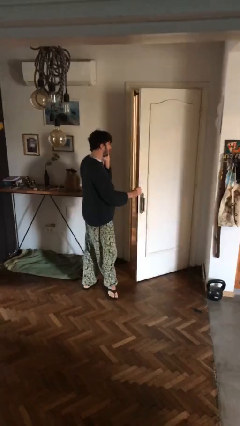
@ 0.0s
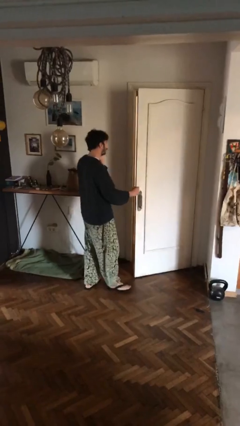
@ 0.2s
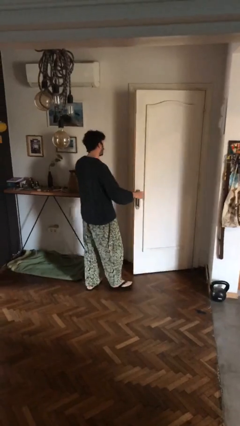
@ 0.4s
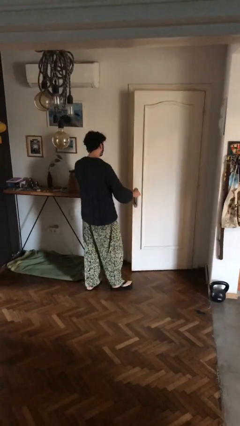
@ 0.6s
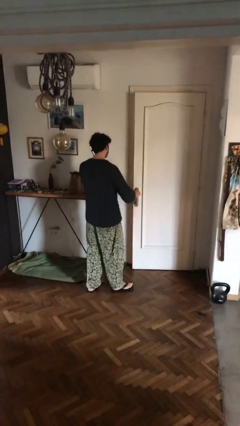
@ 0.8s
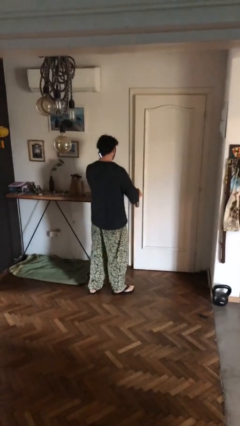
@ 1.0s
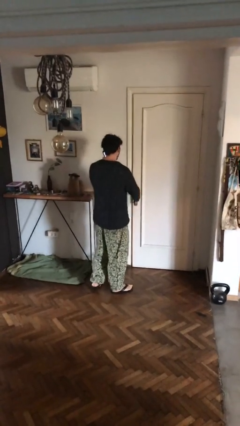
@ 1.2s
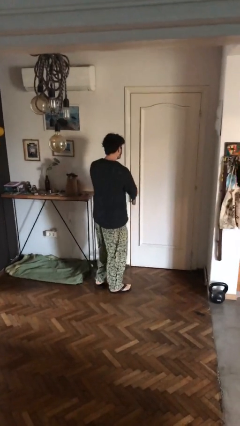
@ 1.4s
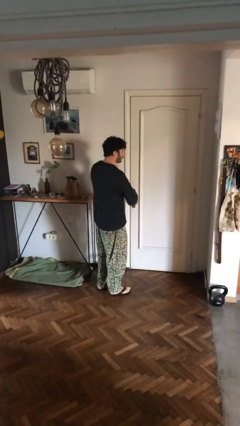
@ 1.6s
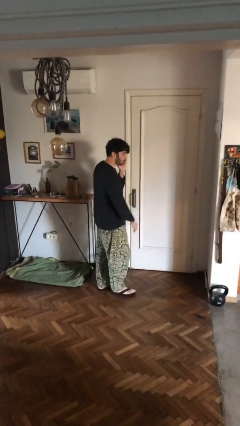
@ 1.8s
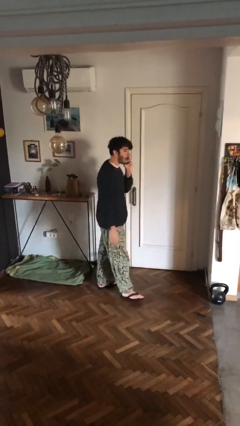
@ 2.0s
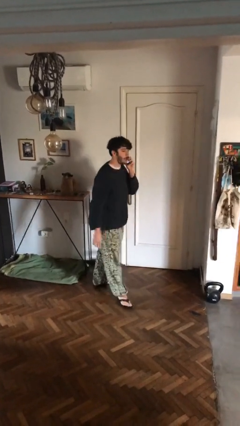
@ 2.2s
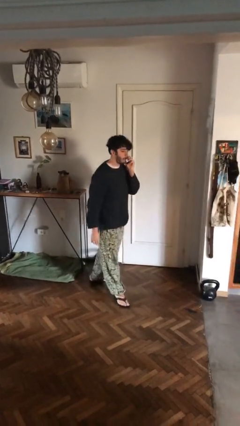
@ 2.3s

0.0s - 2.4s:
person closes facility door

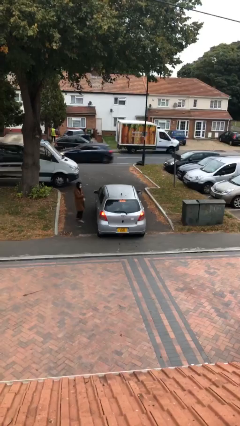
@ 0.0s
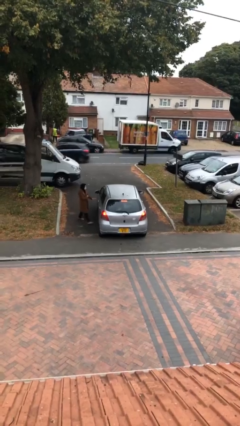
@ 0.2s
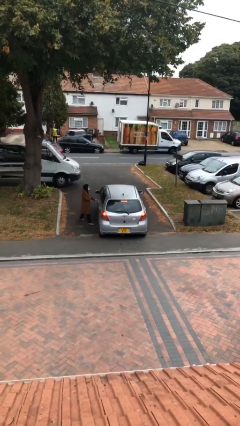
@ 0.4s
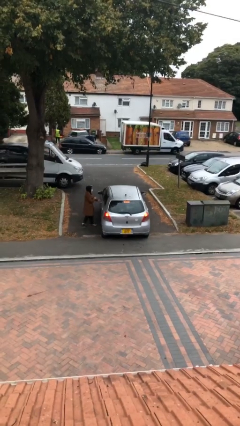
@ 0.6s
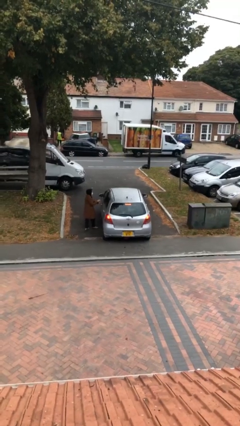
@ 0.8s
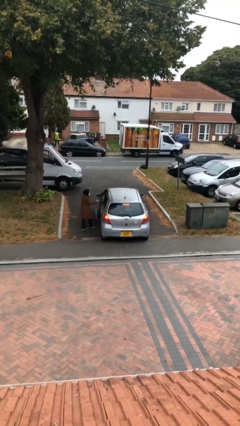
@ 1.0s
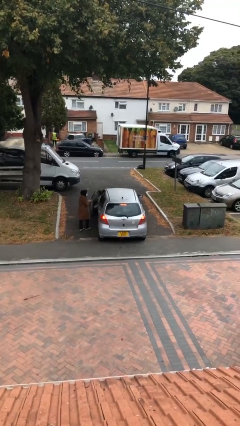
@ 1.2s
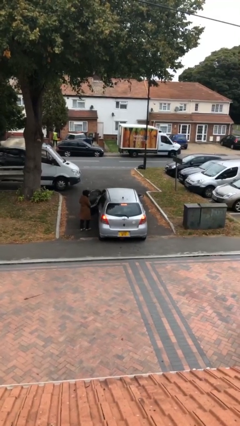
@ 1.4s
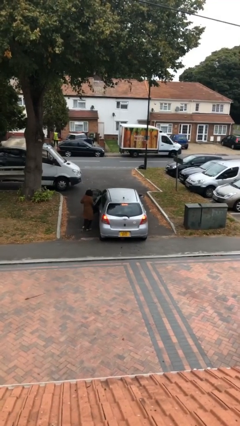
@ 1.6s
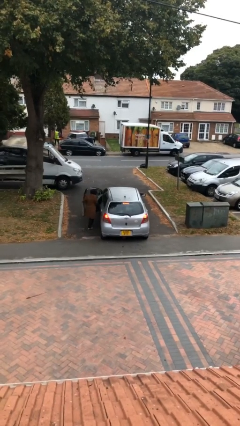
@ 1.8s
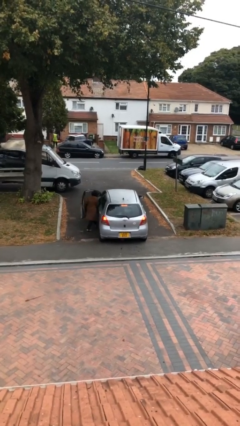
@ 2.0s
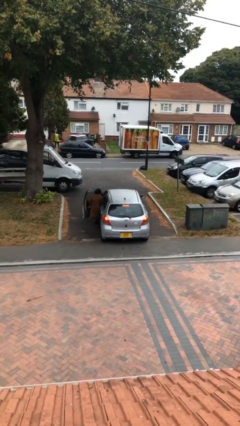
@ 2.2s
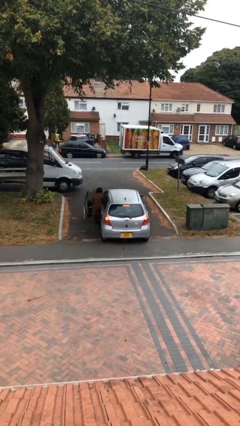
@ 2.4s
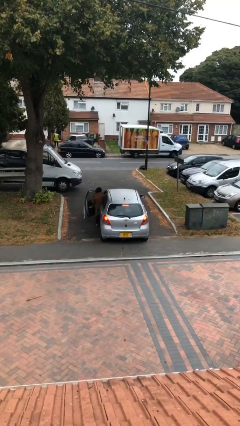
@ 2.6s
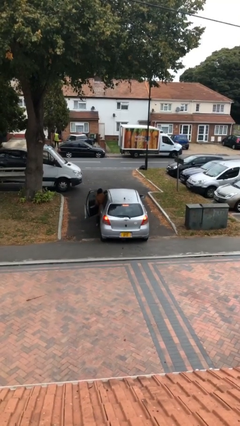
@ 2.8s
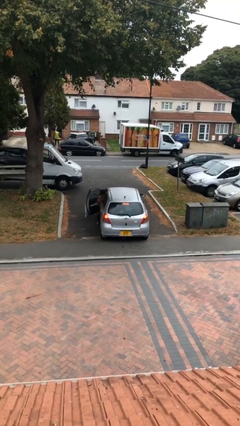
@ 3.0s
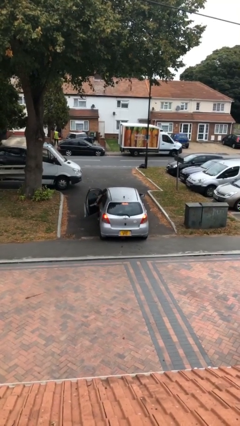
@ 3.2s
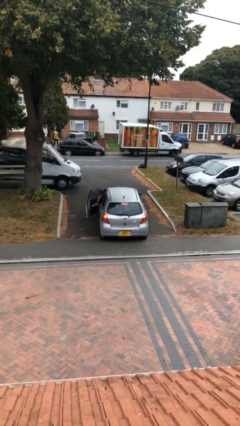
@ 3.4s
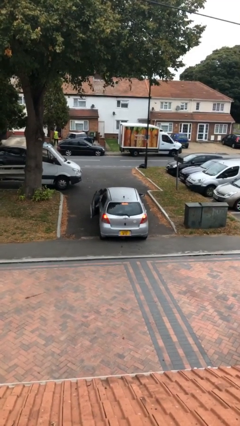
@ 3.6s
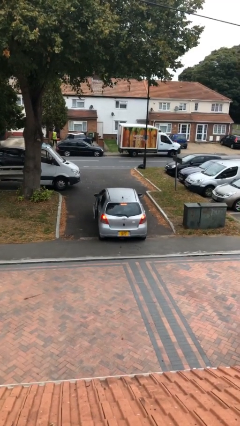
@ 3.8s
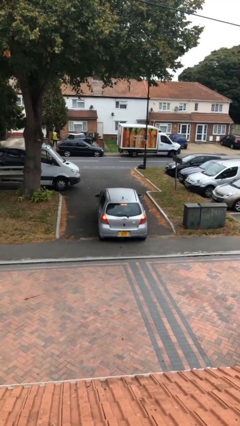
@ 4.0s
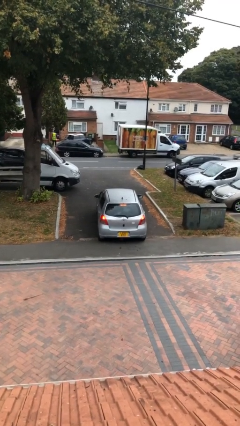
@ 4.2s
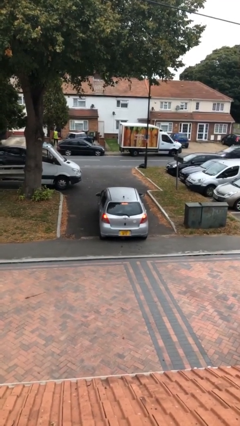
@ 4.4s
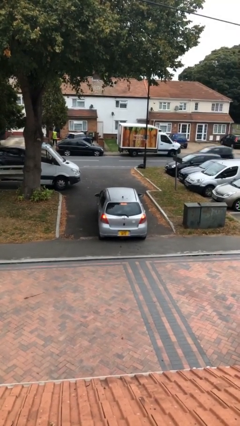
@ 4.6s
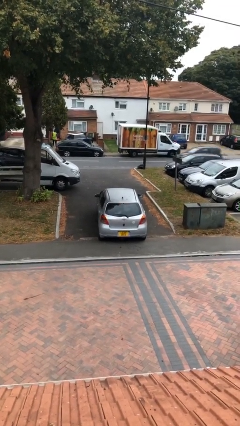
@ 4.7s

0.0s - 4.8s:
car picks up person

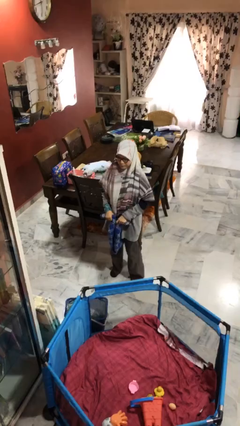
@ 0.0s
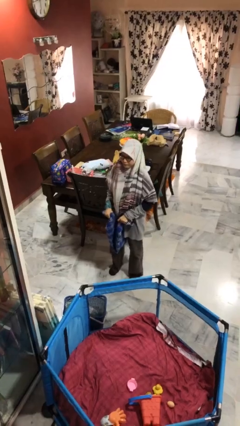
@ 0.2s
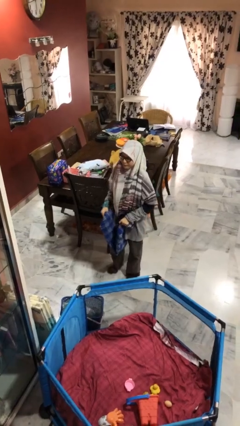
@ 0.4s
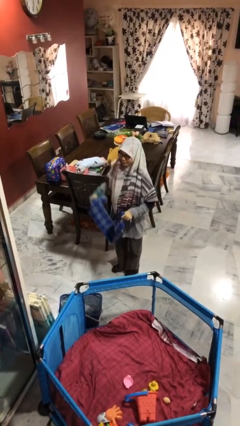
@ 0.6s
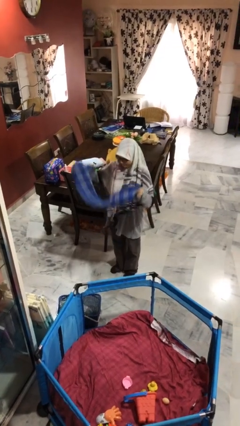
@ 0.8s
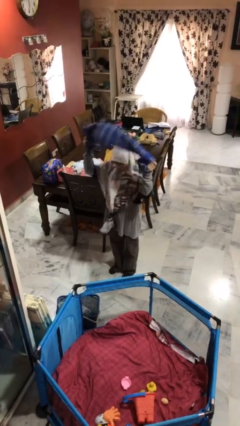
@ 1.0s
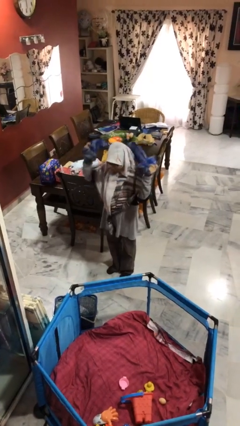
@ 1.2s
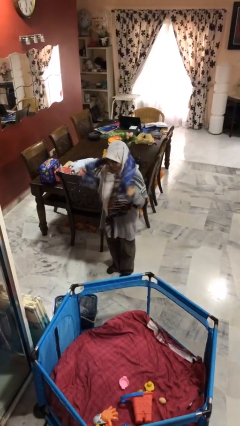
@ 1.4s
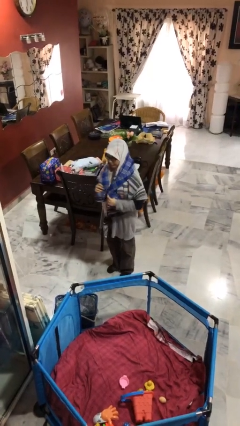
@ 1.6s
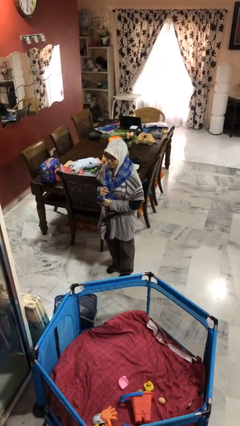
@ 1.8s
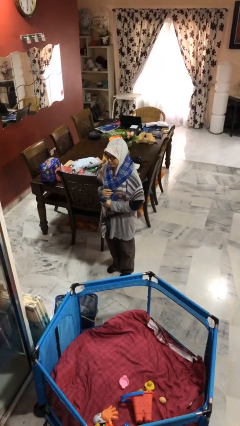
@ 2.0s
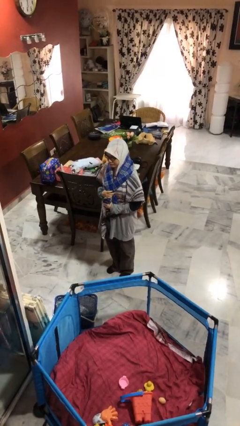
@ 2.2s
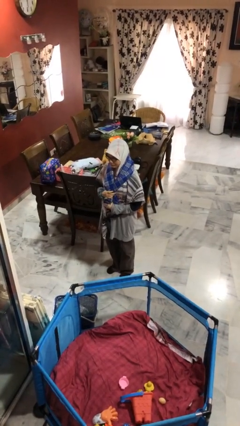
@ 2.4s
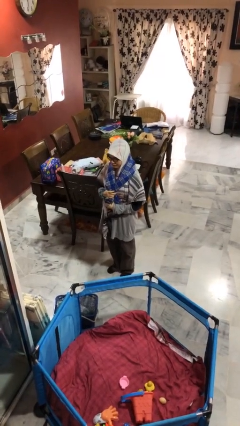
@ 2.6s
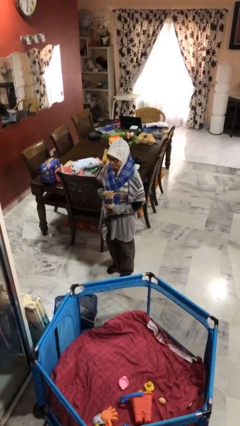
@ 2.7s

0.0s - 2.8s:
person puts on scarf

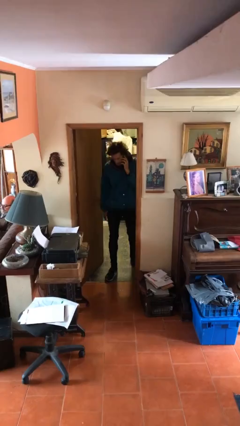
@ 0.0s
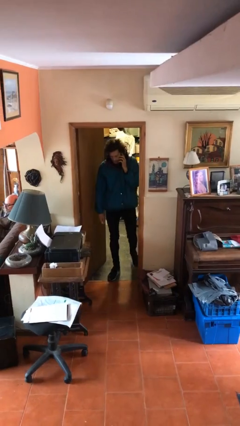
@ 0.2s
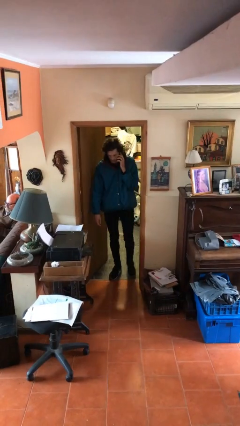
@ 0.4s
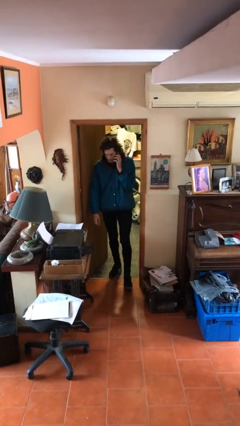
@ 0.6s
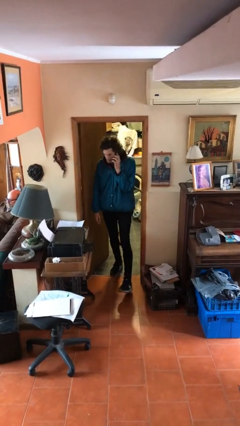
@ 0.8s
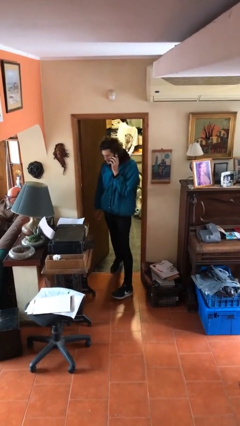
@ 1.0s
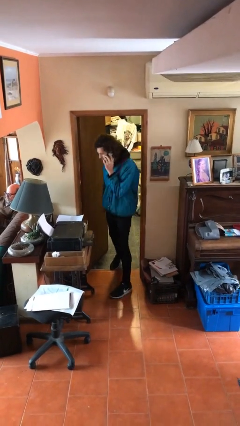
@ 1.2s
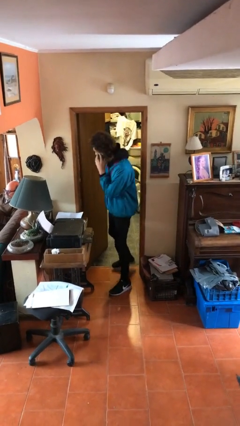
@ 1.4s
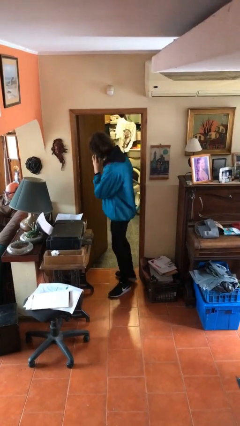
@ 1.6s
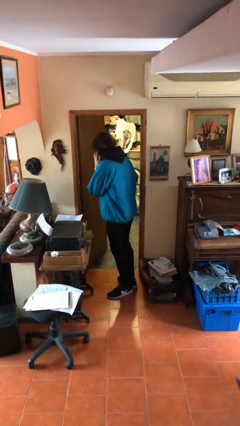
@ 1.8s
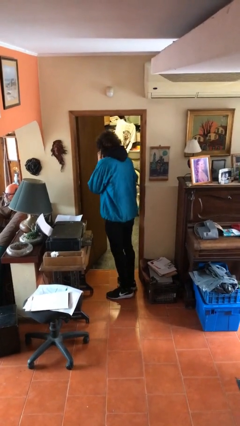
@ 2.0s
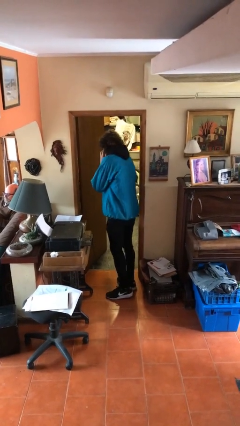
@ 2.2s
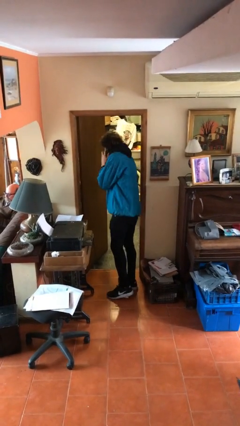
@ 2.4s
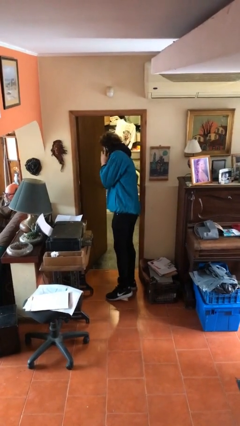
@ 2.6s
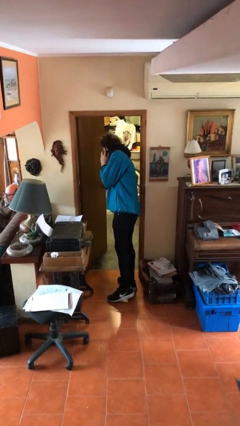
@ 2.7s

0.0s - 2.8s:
person enters scene through structure

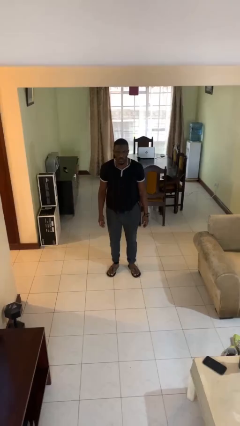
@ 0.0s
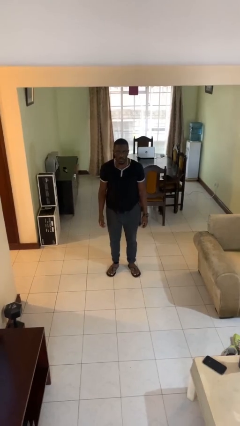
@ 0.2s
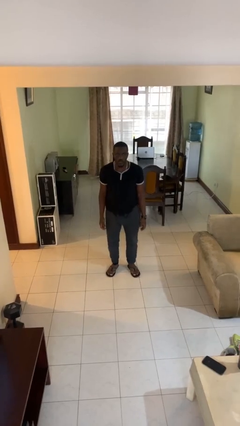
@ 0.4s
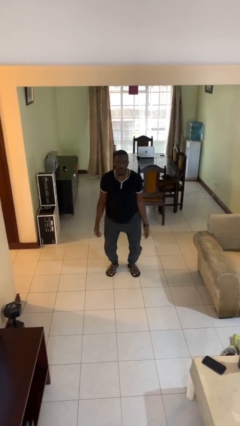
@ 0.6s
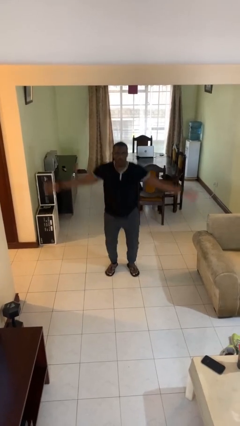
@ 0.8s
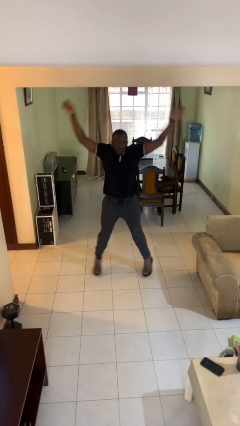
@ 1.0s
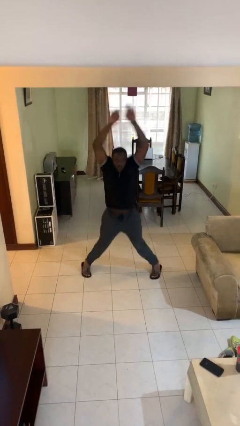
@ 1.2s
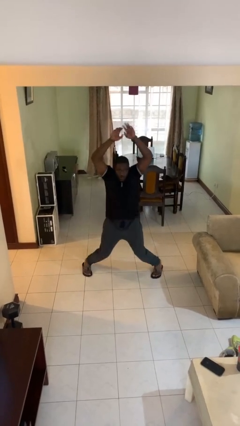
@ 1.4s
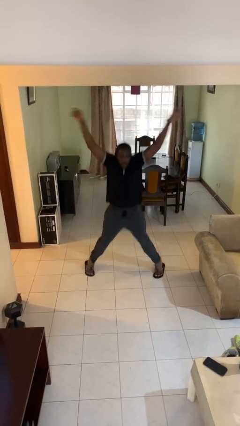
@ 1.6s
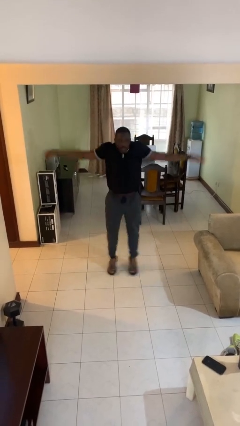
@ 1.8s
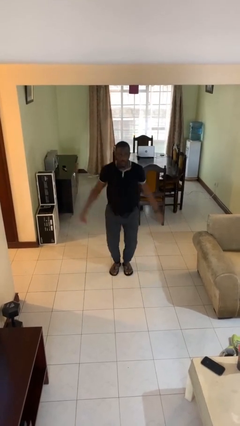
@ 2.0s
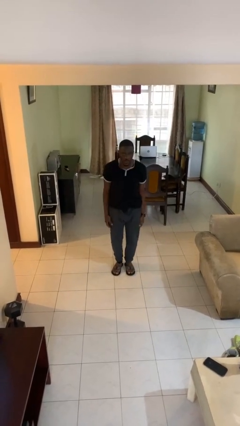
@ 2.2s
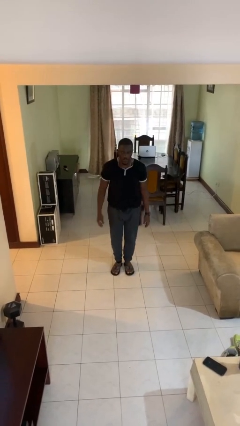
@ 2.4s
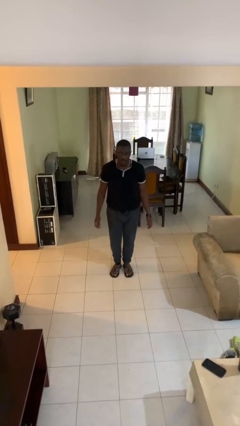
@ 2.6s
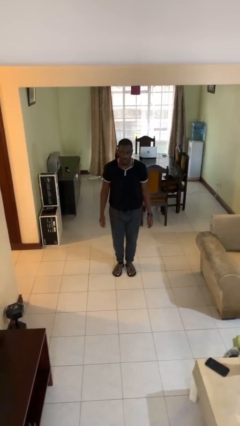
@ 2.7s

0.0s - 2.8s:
person exercises with jumping jacks

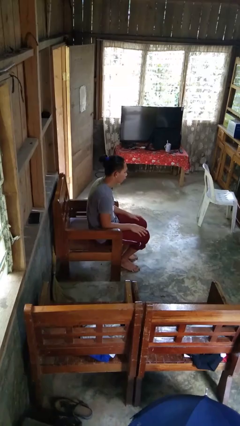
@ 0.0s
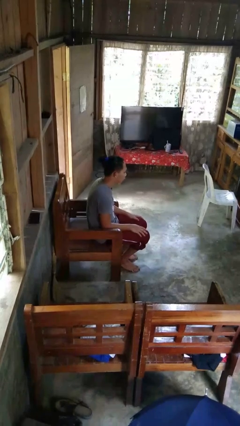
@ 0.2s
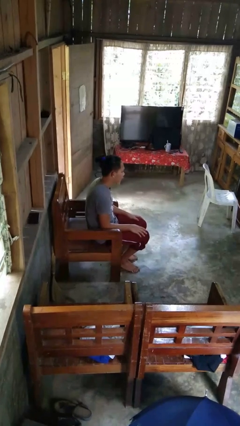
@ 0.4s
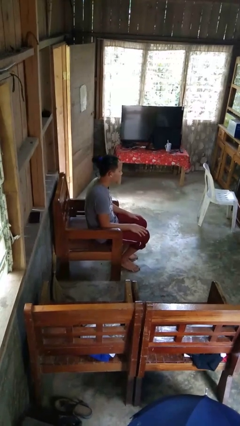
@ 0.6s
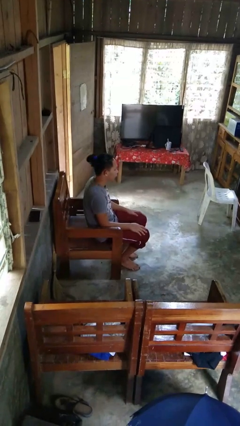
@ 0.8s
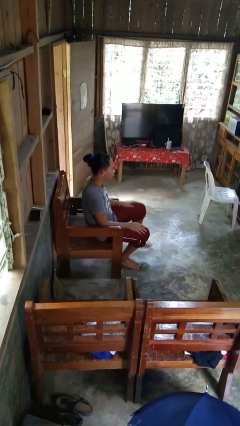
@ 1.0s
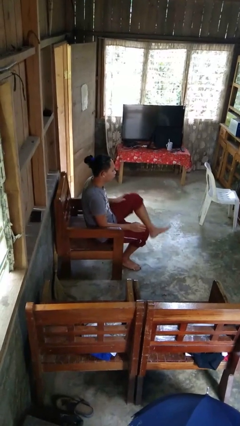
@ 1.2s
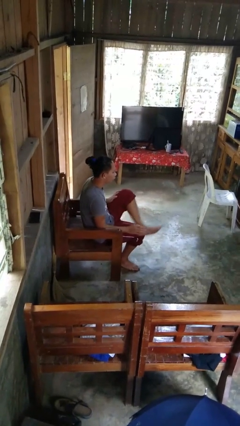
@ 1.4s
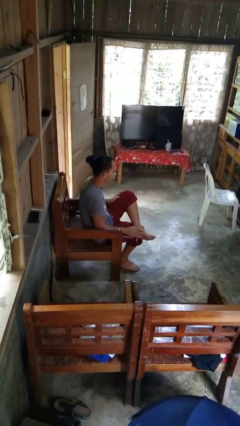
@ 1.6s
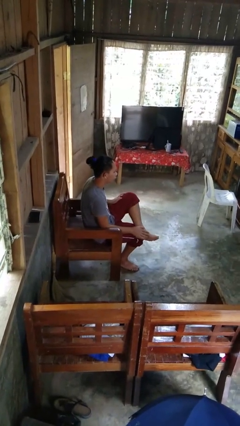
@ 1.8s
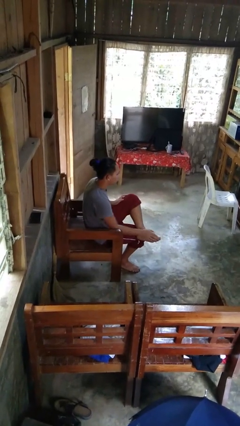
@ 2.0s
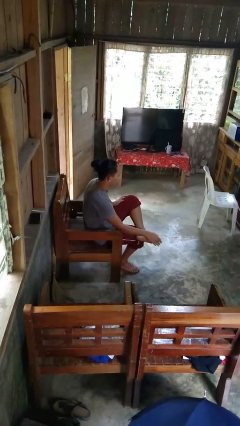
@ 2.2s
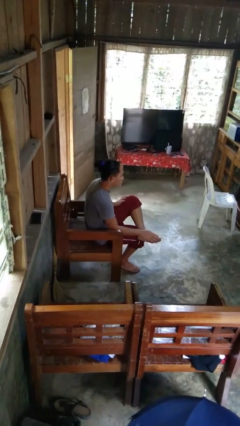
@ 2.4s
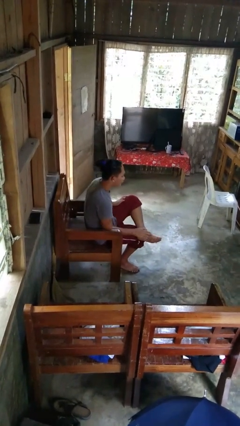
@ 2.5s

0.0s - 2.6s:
person rubs foot
